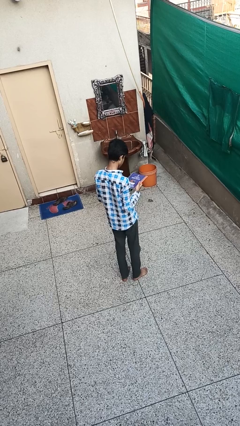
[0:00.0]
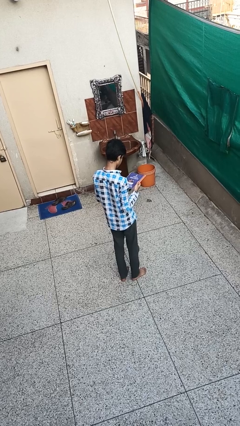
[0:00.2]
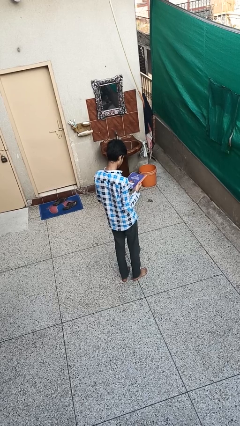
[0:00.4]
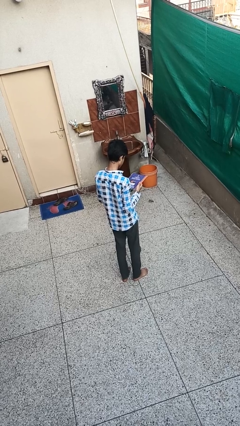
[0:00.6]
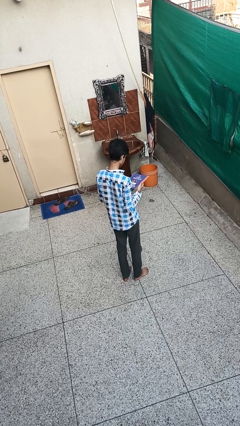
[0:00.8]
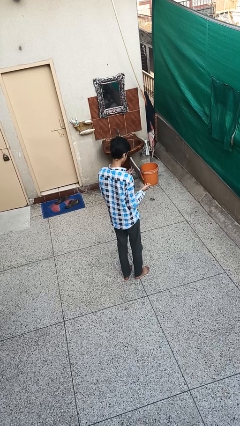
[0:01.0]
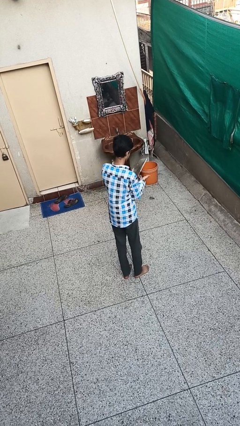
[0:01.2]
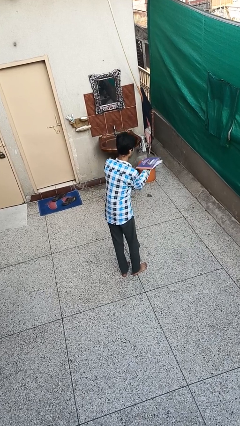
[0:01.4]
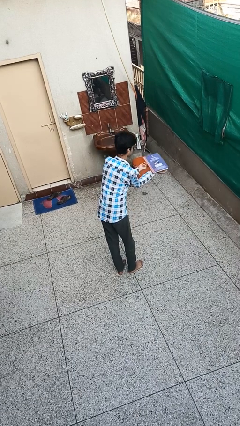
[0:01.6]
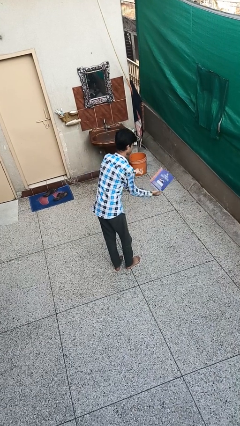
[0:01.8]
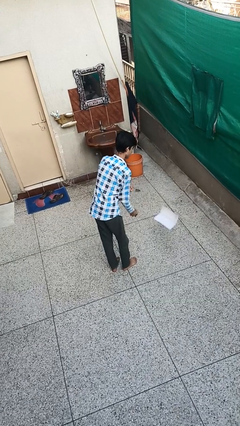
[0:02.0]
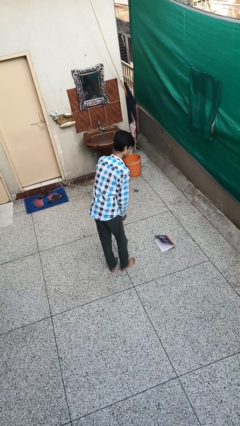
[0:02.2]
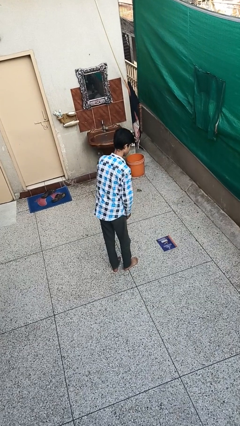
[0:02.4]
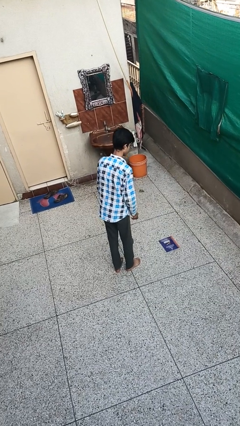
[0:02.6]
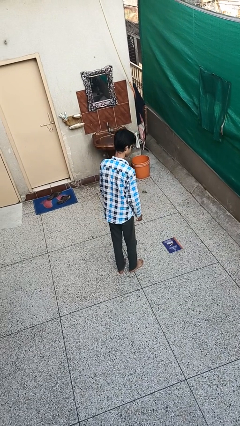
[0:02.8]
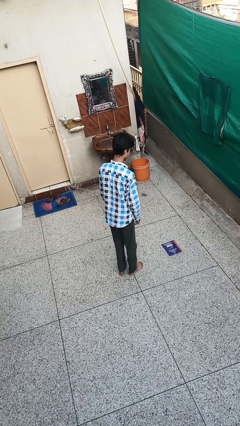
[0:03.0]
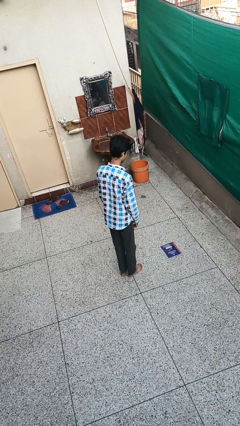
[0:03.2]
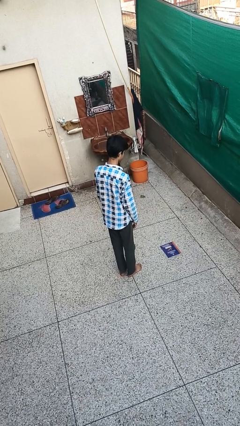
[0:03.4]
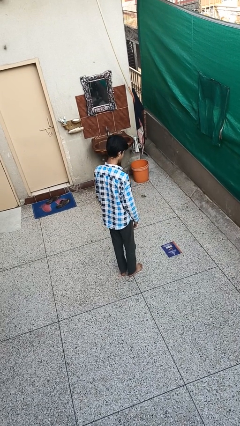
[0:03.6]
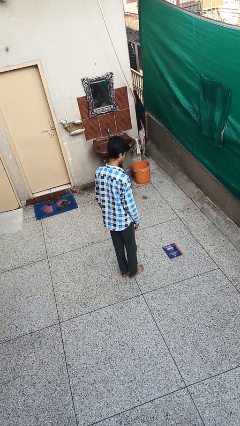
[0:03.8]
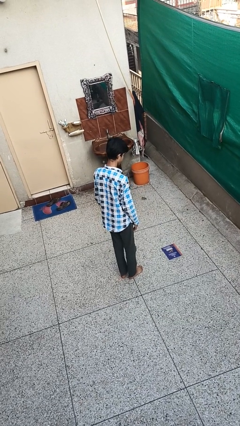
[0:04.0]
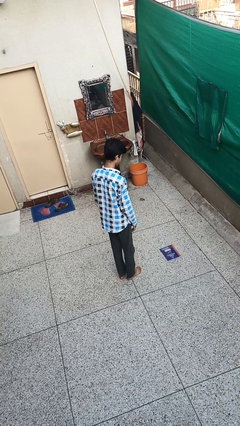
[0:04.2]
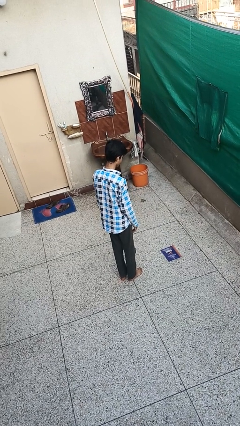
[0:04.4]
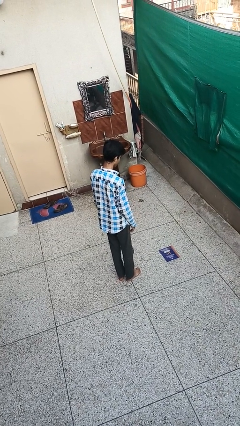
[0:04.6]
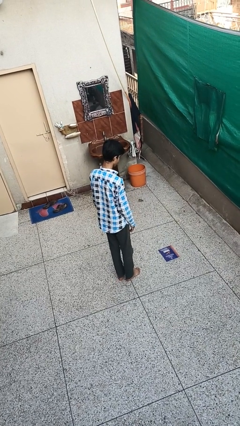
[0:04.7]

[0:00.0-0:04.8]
person drops object

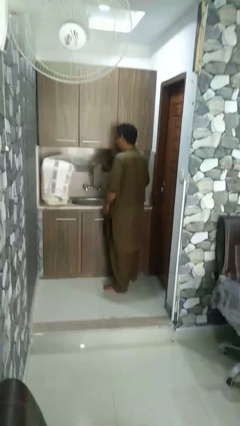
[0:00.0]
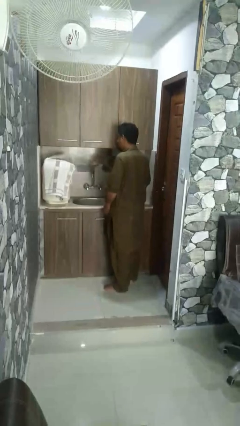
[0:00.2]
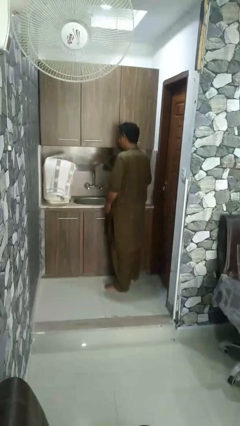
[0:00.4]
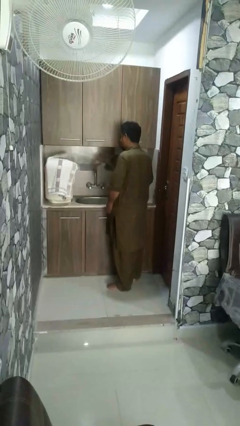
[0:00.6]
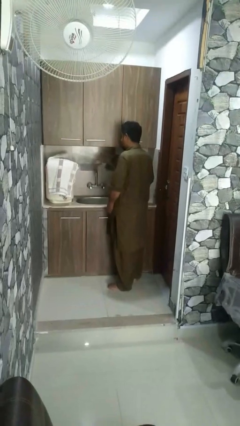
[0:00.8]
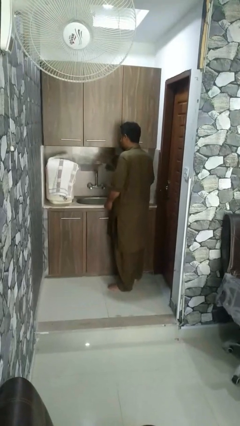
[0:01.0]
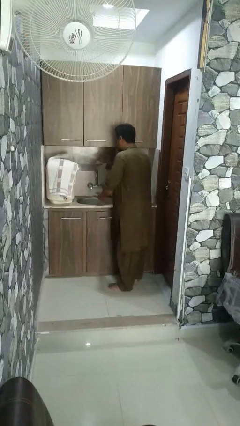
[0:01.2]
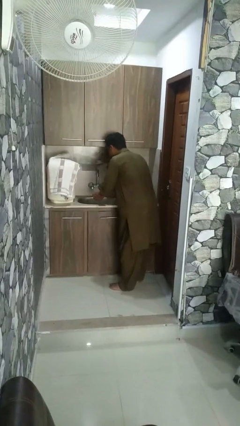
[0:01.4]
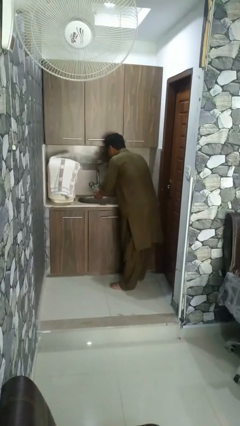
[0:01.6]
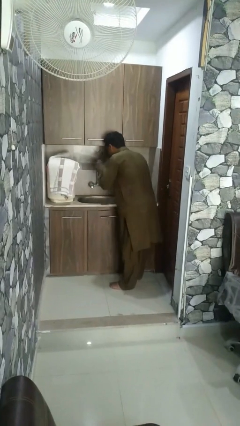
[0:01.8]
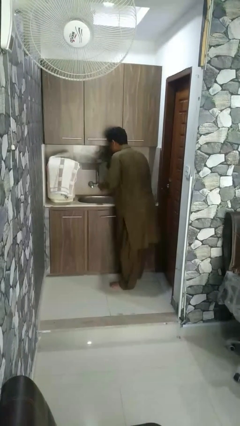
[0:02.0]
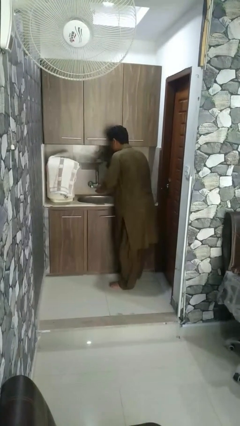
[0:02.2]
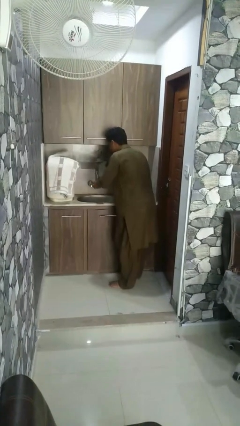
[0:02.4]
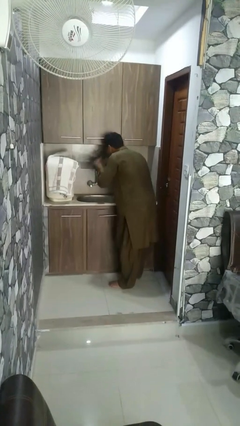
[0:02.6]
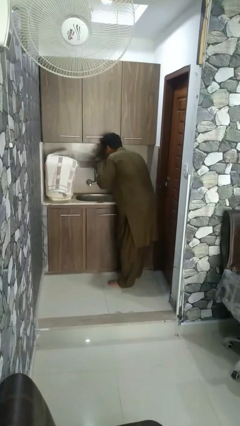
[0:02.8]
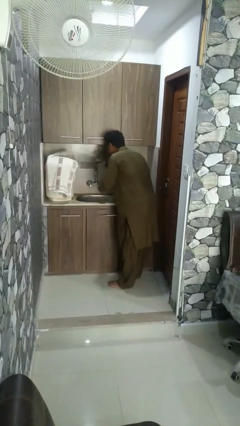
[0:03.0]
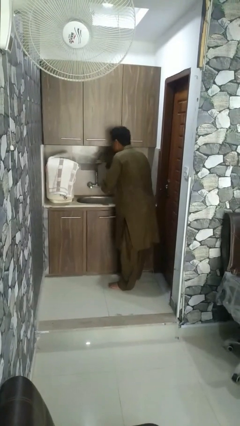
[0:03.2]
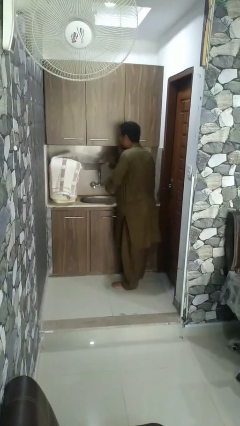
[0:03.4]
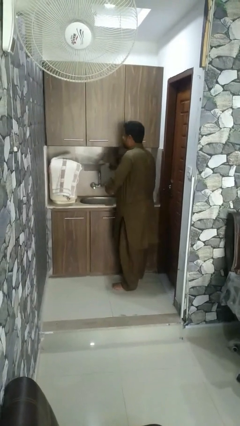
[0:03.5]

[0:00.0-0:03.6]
person washes face

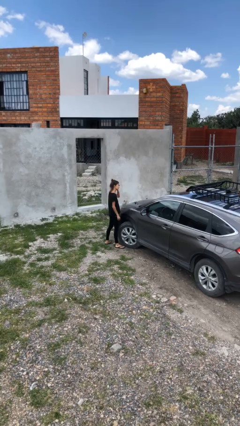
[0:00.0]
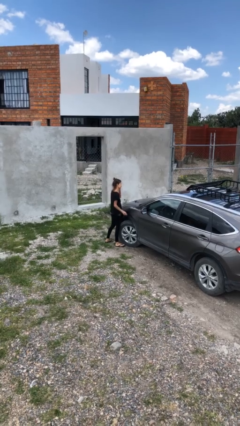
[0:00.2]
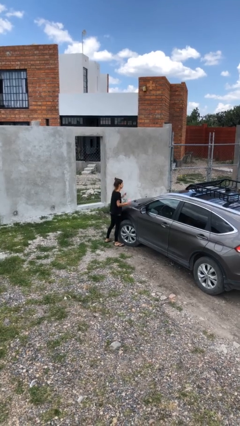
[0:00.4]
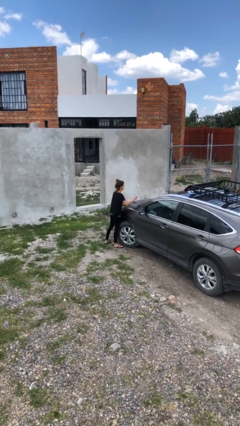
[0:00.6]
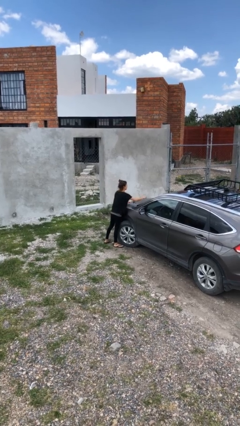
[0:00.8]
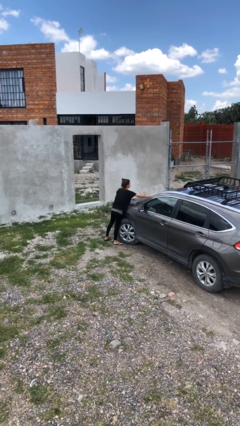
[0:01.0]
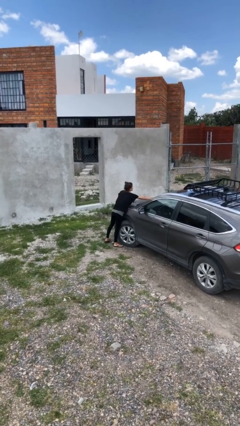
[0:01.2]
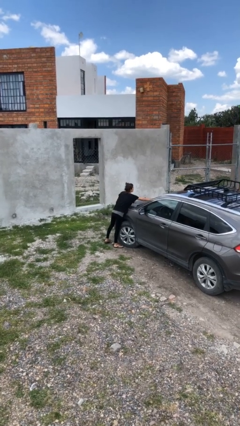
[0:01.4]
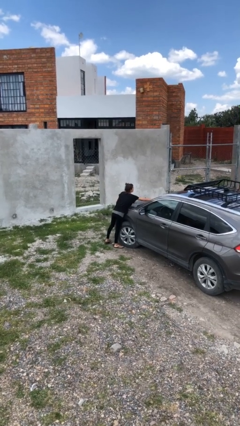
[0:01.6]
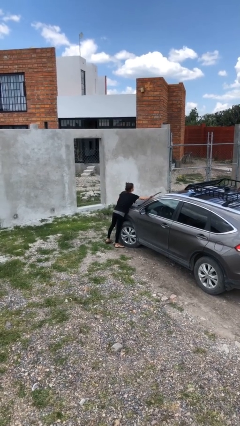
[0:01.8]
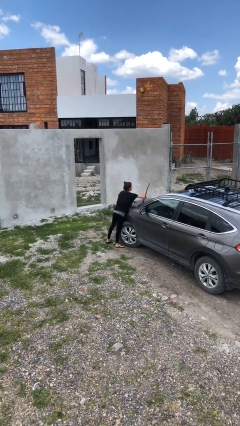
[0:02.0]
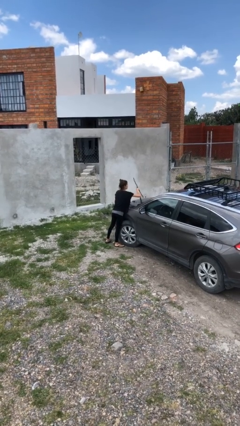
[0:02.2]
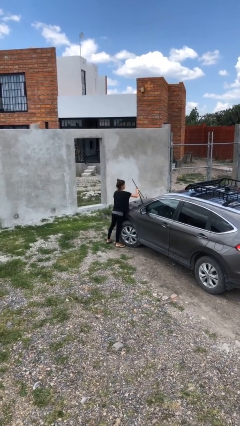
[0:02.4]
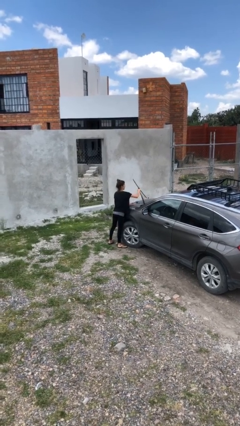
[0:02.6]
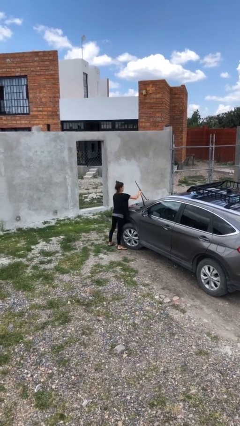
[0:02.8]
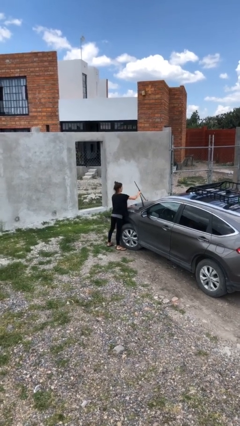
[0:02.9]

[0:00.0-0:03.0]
person flips up car wipers

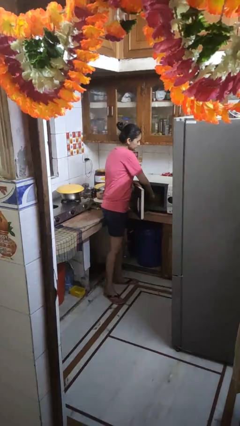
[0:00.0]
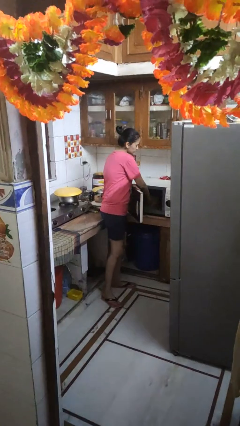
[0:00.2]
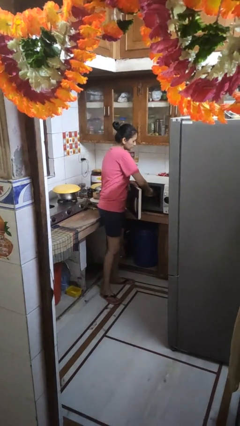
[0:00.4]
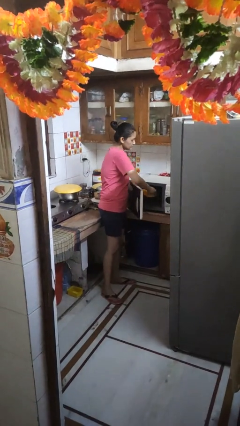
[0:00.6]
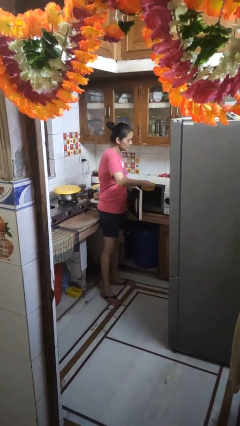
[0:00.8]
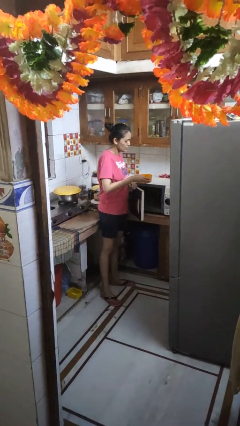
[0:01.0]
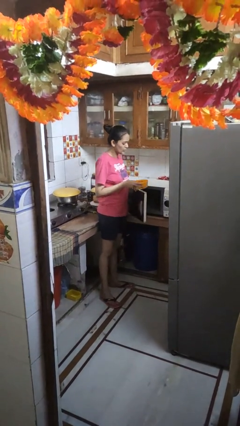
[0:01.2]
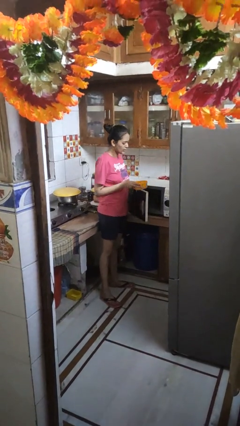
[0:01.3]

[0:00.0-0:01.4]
person takes object from microwave

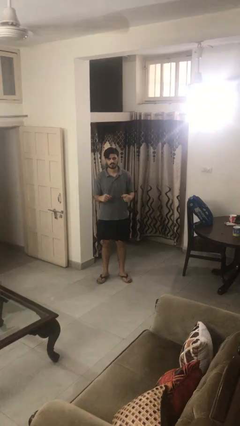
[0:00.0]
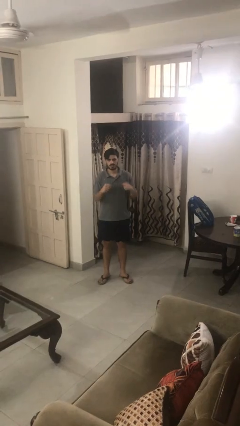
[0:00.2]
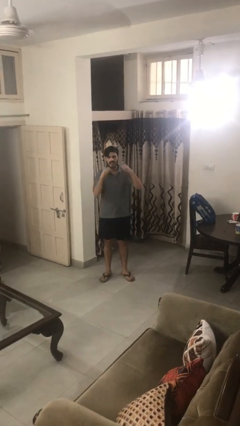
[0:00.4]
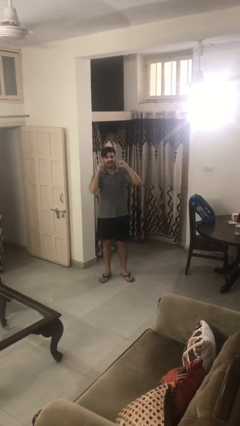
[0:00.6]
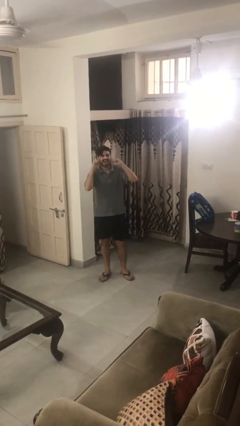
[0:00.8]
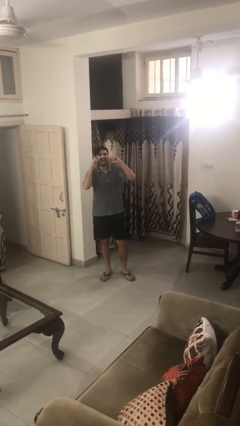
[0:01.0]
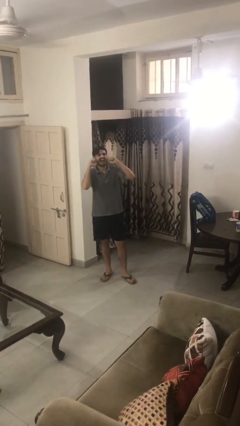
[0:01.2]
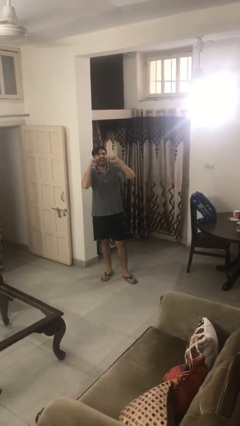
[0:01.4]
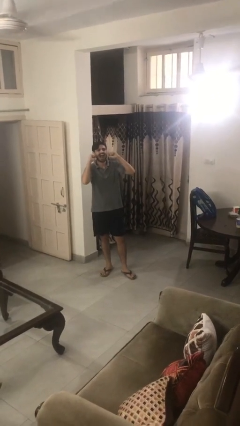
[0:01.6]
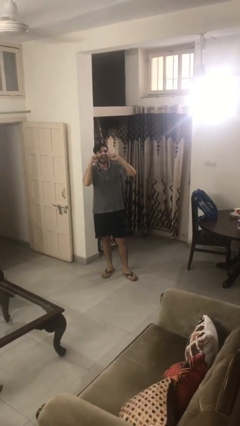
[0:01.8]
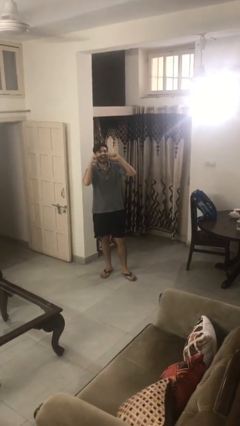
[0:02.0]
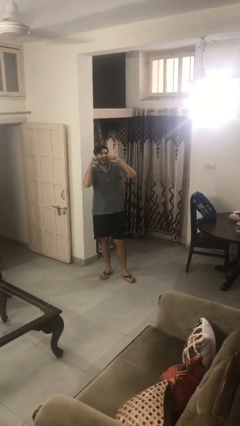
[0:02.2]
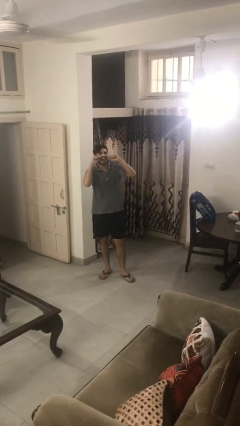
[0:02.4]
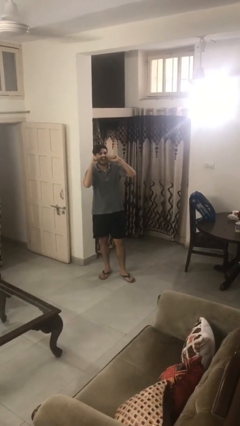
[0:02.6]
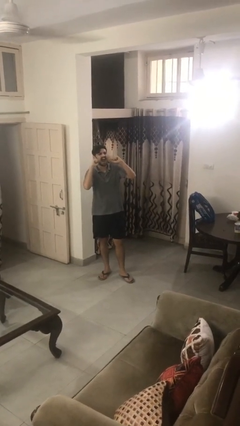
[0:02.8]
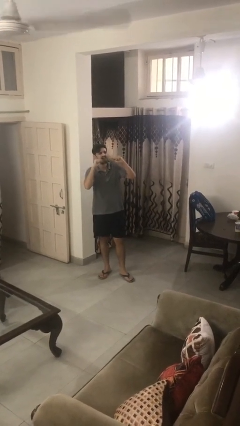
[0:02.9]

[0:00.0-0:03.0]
person flosses

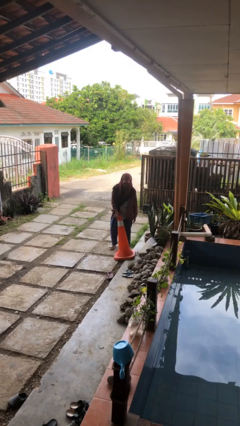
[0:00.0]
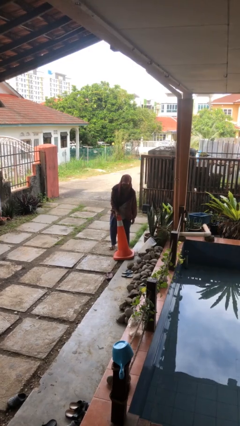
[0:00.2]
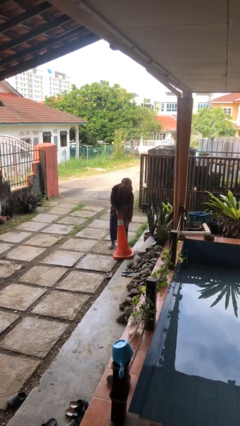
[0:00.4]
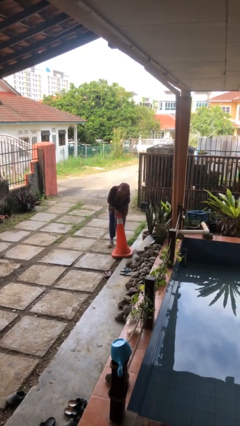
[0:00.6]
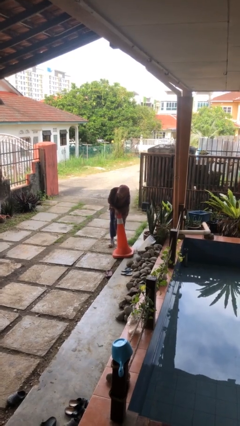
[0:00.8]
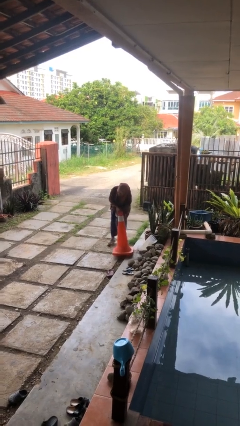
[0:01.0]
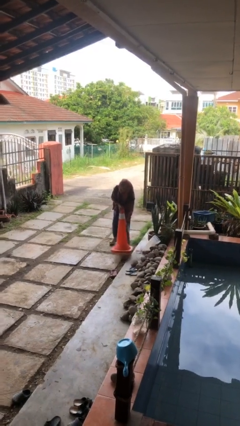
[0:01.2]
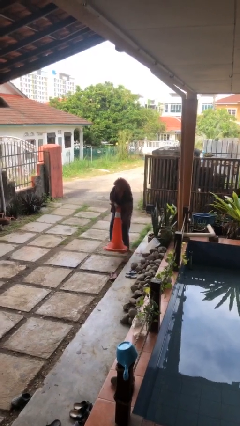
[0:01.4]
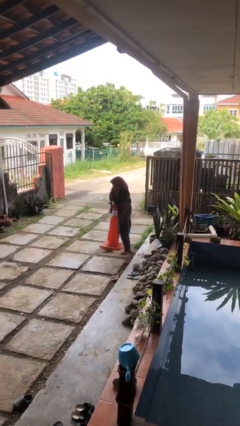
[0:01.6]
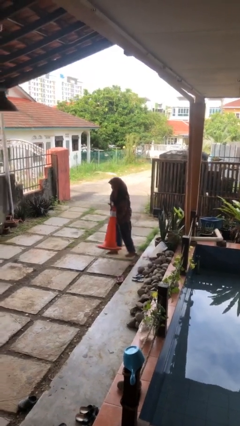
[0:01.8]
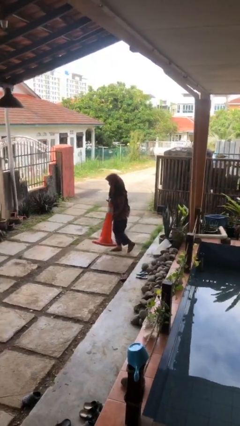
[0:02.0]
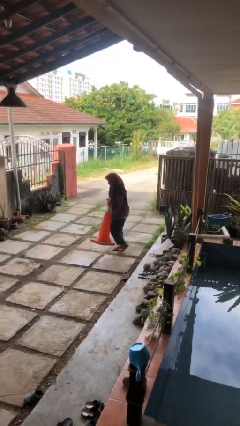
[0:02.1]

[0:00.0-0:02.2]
person picks up object from floor
